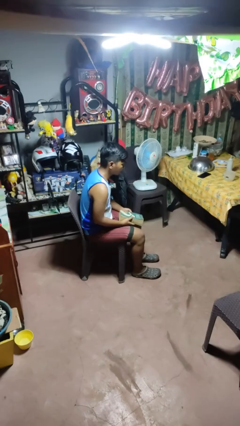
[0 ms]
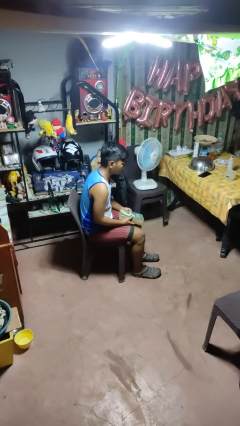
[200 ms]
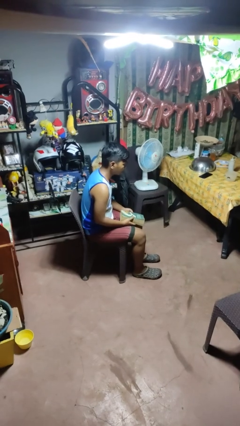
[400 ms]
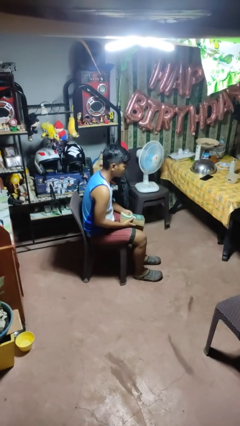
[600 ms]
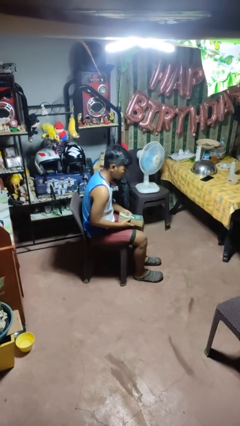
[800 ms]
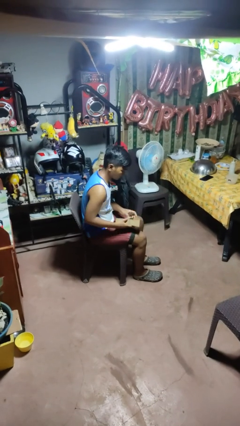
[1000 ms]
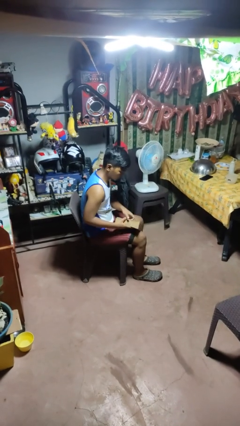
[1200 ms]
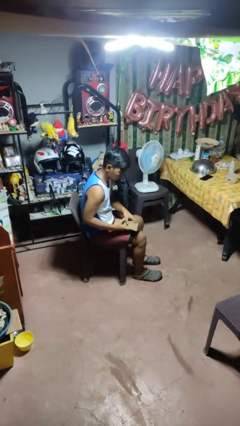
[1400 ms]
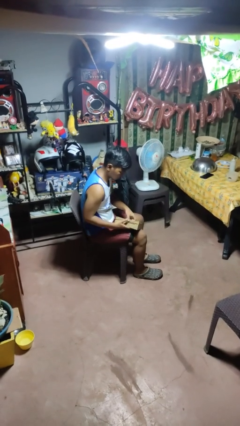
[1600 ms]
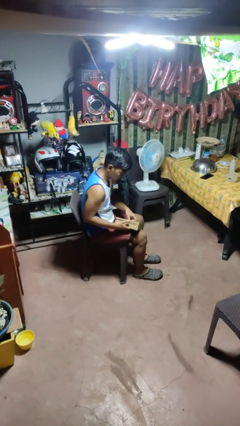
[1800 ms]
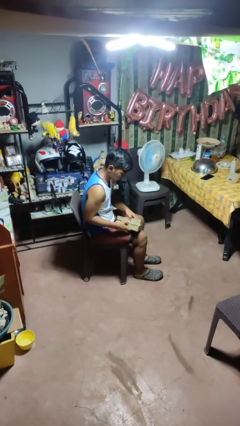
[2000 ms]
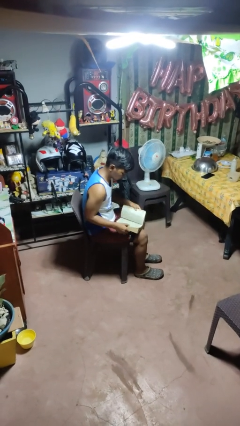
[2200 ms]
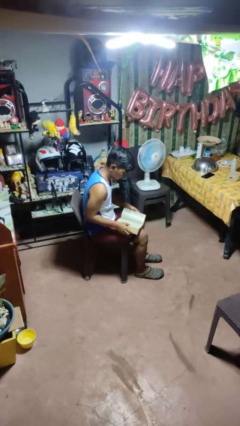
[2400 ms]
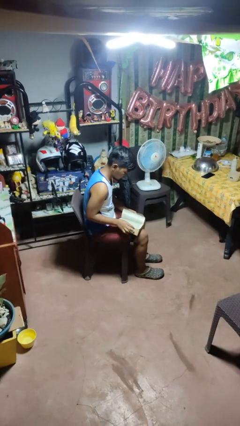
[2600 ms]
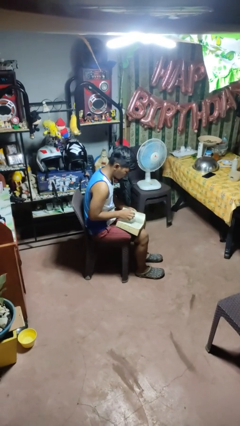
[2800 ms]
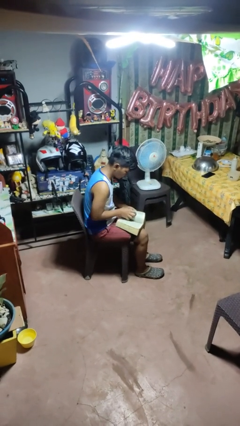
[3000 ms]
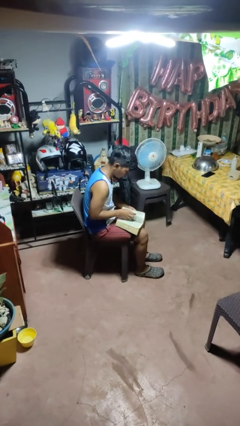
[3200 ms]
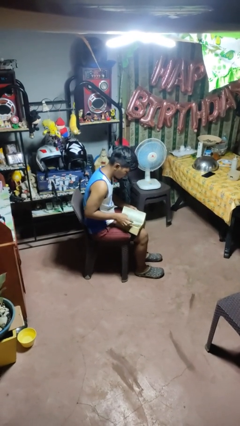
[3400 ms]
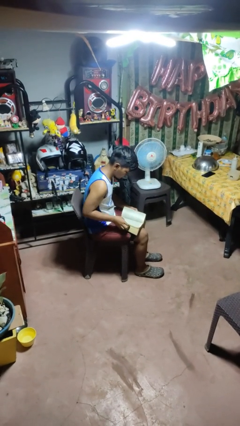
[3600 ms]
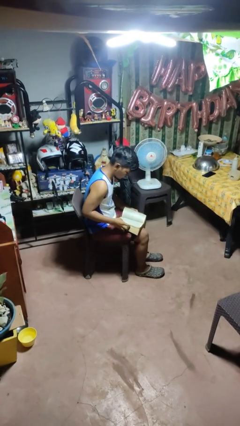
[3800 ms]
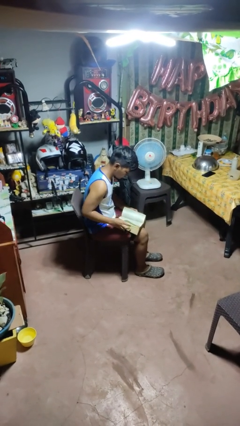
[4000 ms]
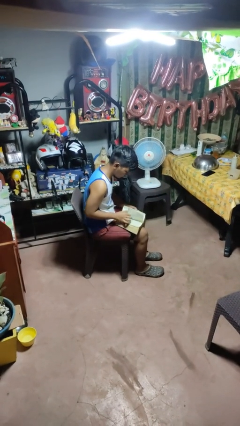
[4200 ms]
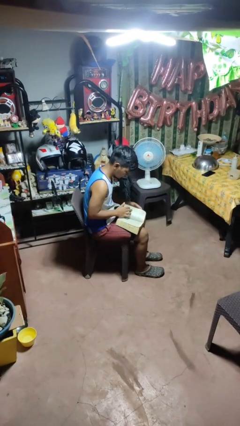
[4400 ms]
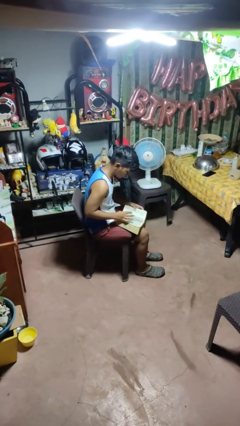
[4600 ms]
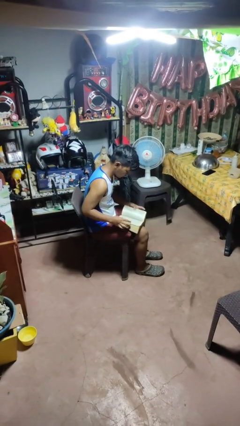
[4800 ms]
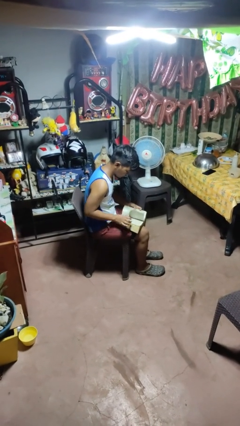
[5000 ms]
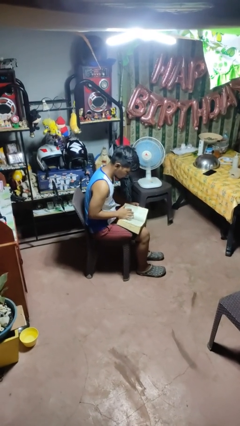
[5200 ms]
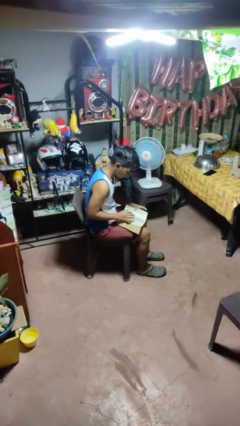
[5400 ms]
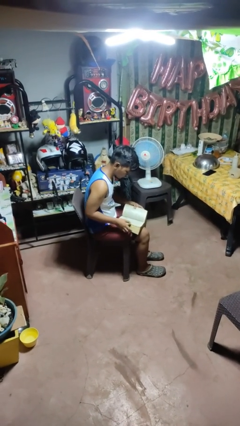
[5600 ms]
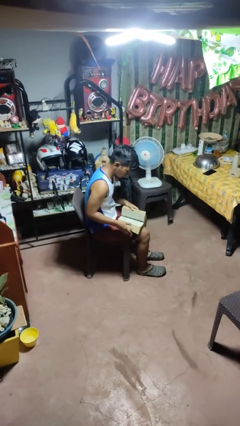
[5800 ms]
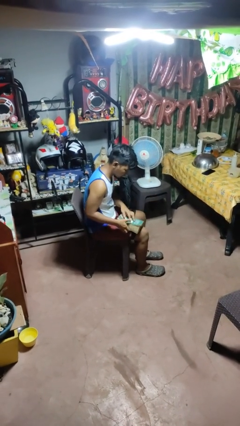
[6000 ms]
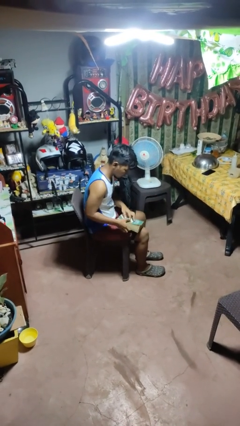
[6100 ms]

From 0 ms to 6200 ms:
person reads book

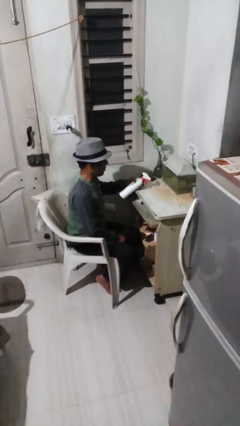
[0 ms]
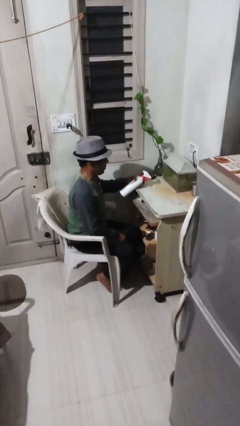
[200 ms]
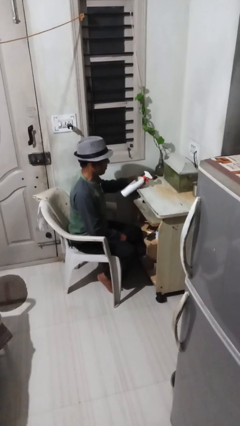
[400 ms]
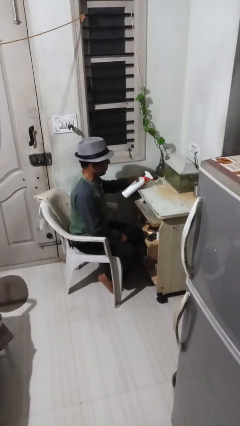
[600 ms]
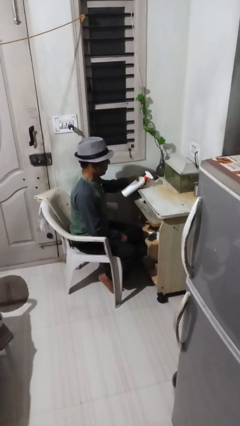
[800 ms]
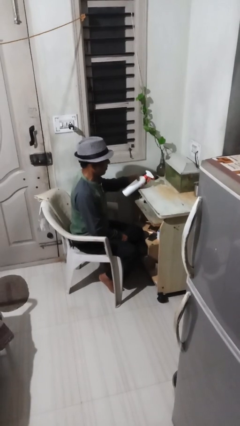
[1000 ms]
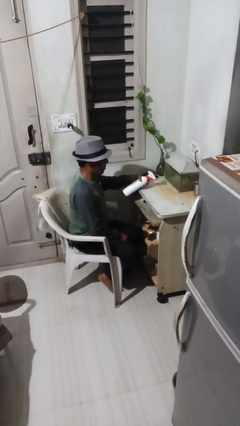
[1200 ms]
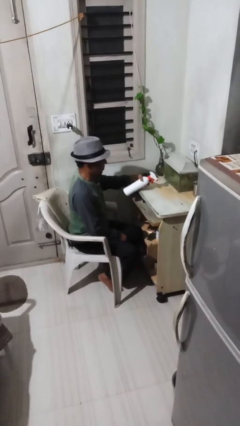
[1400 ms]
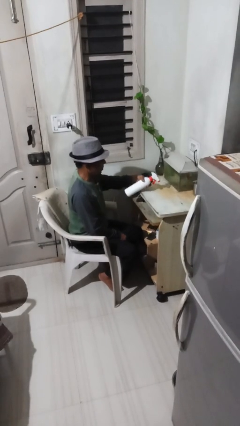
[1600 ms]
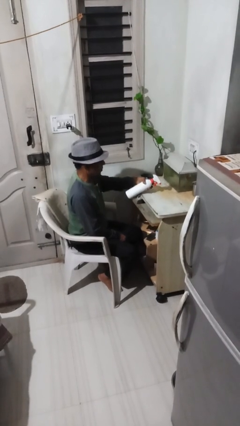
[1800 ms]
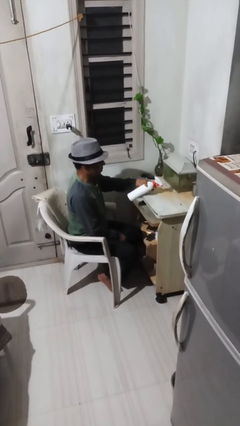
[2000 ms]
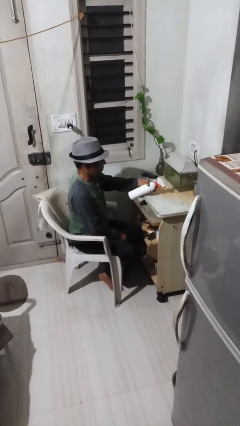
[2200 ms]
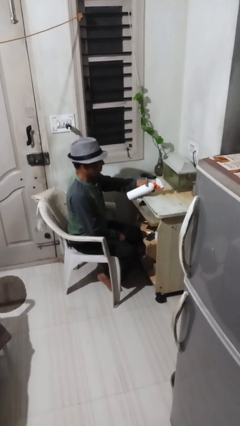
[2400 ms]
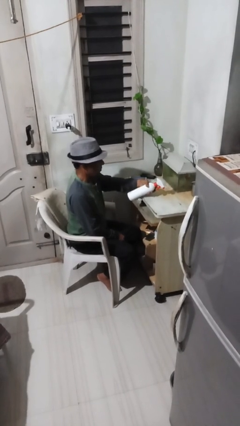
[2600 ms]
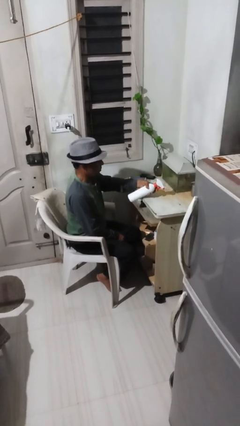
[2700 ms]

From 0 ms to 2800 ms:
person sprays from bottle

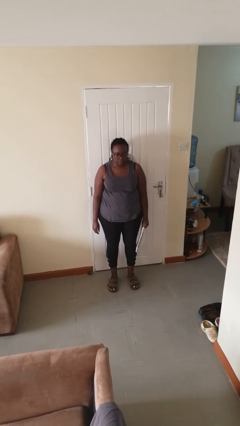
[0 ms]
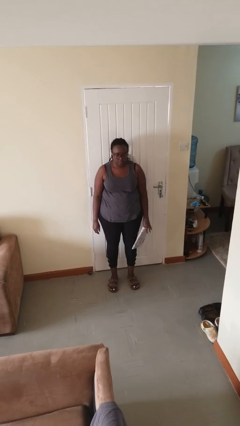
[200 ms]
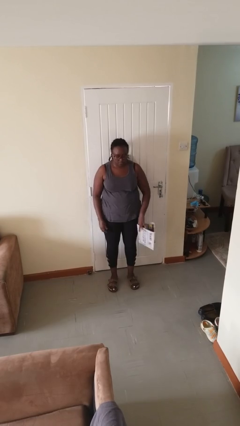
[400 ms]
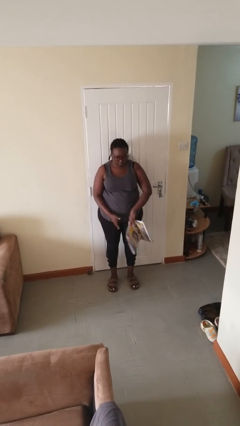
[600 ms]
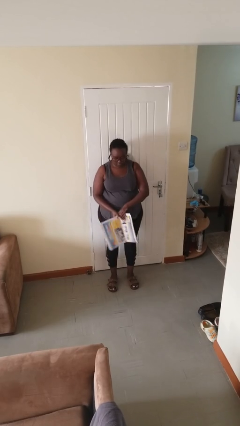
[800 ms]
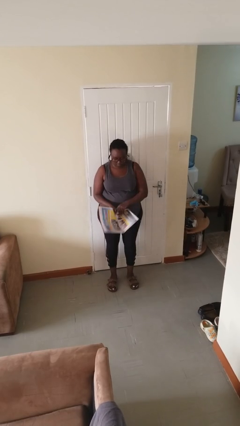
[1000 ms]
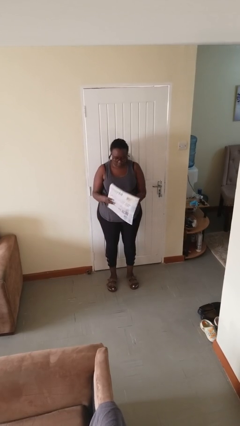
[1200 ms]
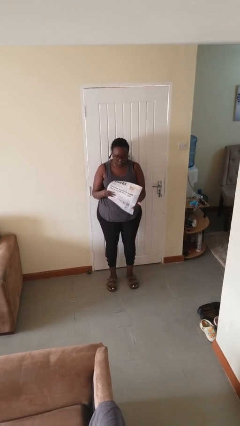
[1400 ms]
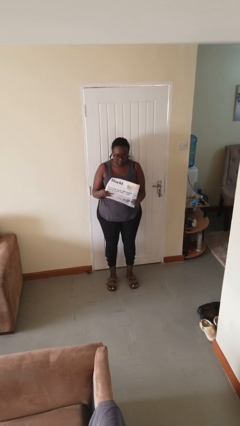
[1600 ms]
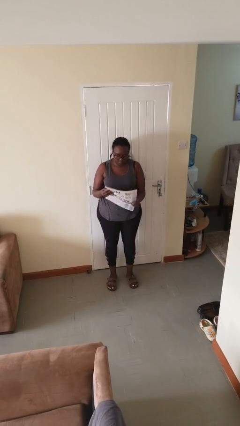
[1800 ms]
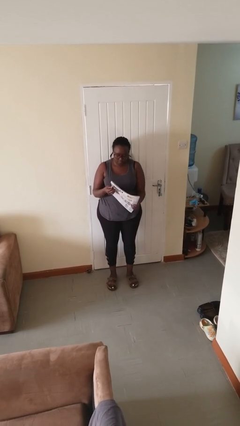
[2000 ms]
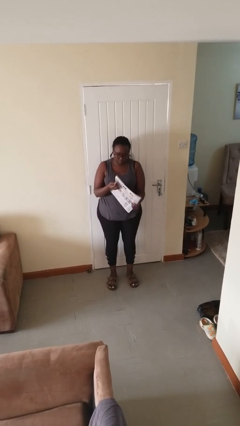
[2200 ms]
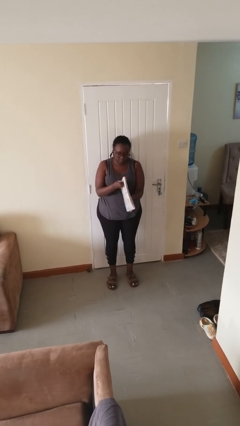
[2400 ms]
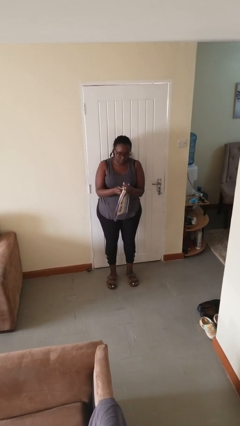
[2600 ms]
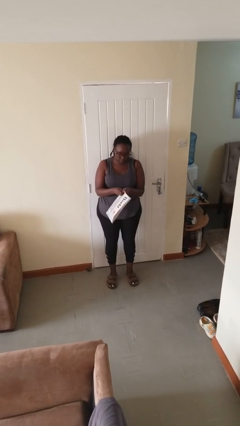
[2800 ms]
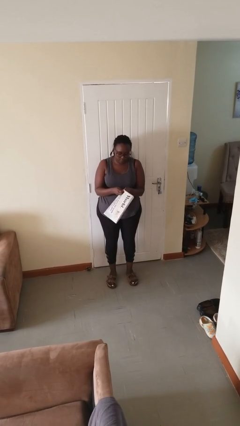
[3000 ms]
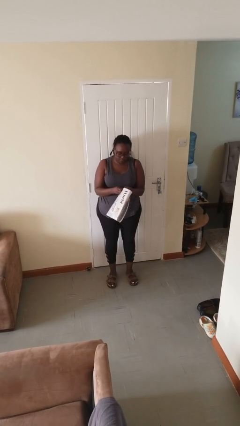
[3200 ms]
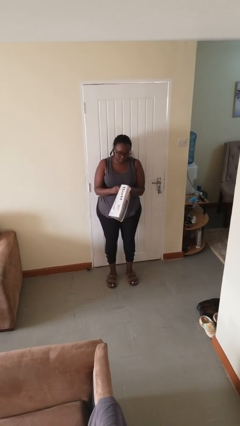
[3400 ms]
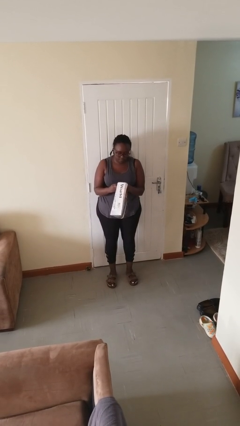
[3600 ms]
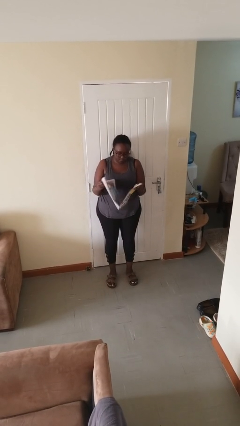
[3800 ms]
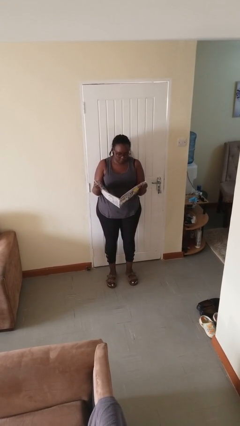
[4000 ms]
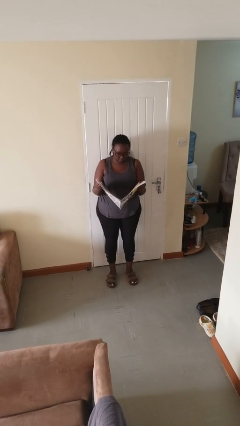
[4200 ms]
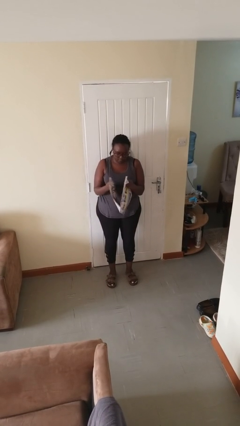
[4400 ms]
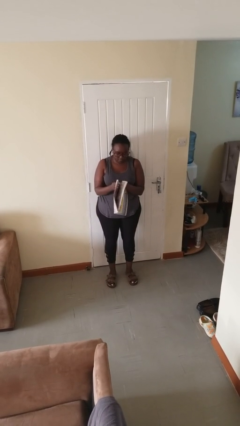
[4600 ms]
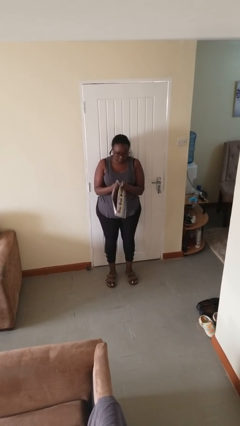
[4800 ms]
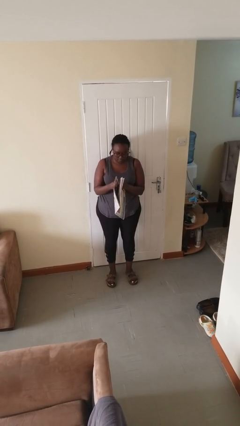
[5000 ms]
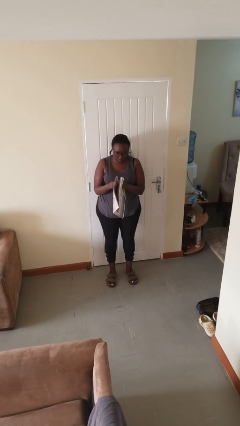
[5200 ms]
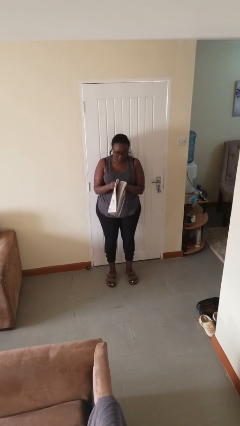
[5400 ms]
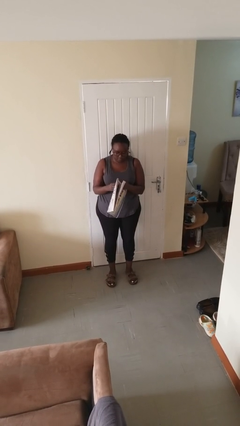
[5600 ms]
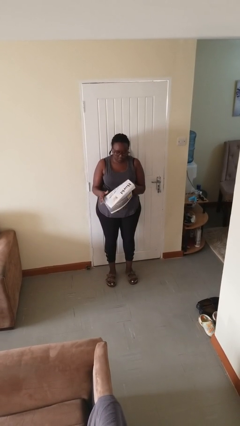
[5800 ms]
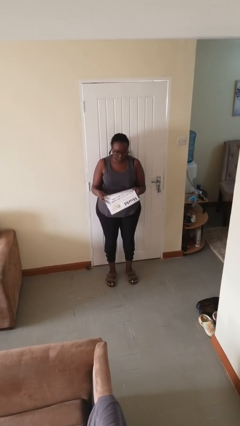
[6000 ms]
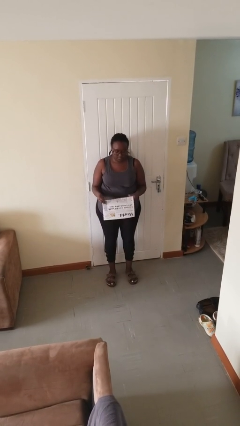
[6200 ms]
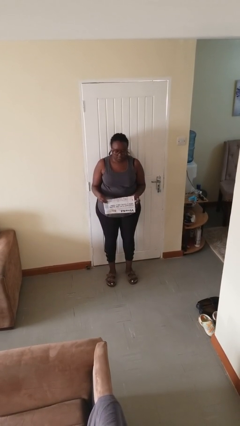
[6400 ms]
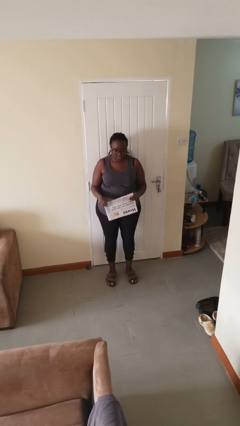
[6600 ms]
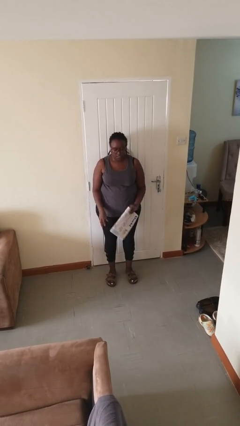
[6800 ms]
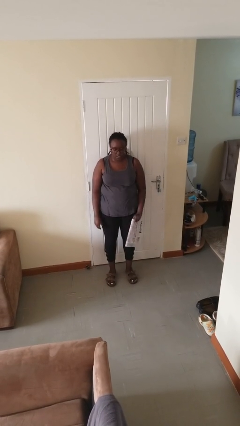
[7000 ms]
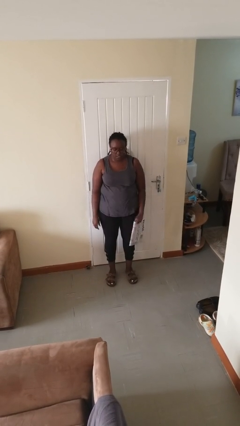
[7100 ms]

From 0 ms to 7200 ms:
person reads newspaper

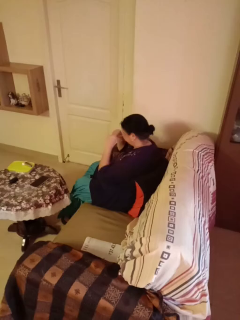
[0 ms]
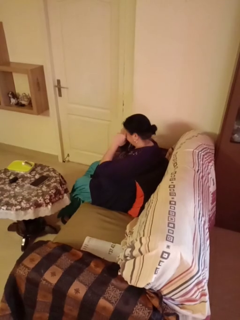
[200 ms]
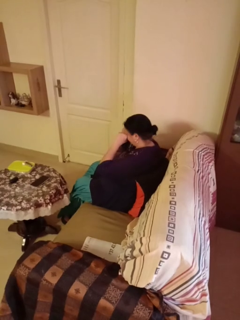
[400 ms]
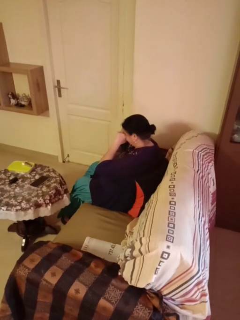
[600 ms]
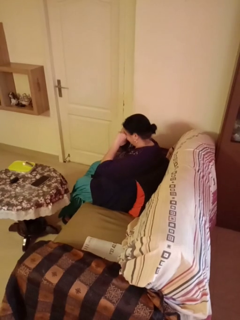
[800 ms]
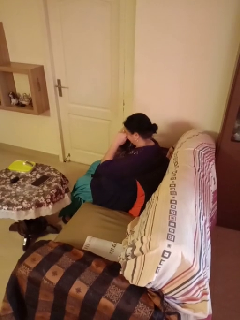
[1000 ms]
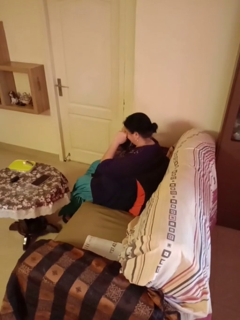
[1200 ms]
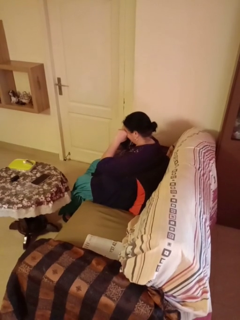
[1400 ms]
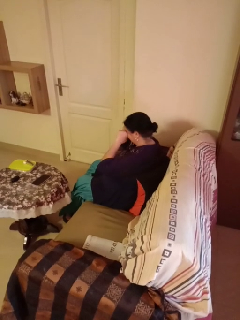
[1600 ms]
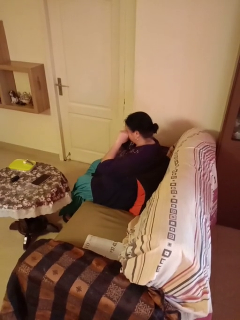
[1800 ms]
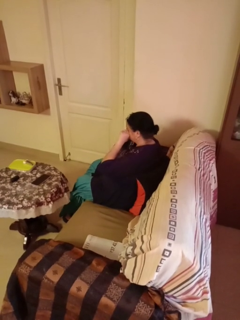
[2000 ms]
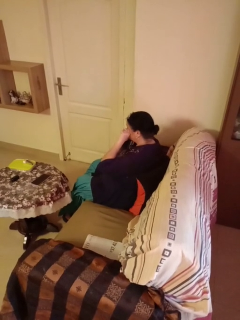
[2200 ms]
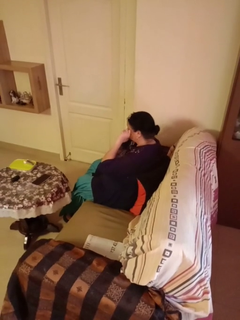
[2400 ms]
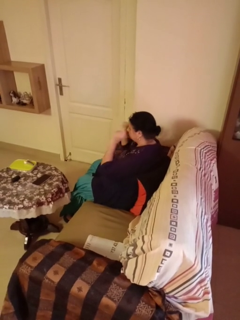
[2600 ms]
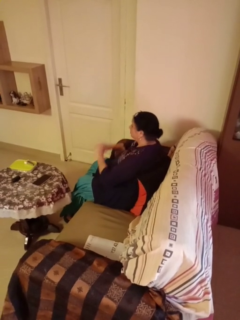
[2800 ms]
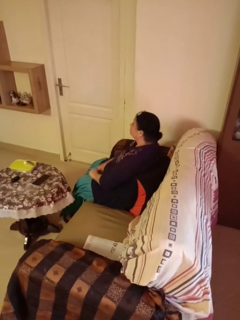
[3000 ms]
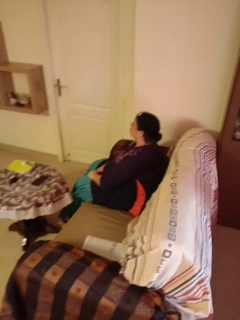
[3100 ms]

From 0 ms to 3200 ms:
person rubs eyes
